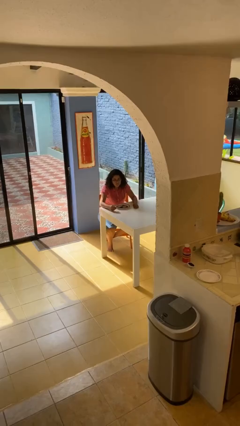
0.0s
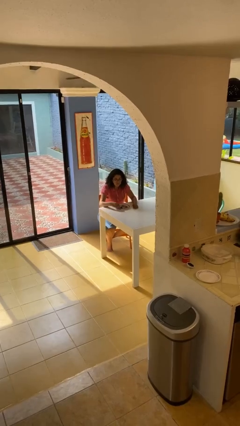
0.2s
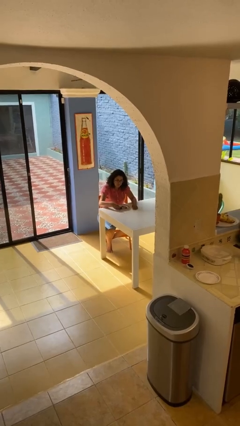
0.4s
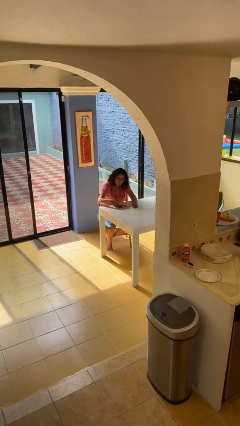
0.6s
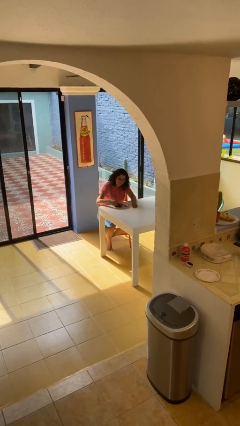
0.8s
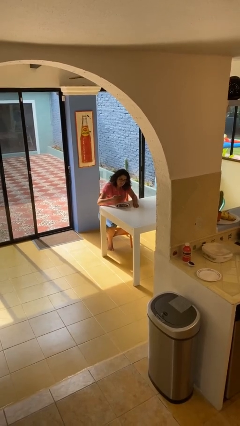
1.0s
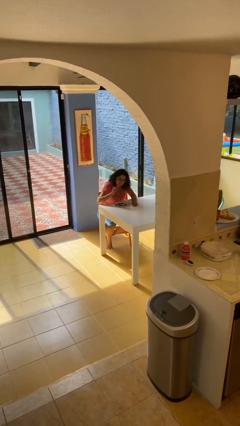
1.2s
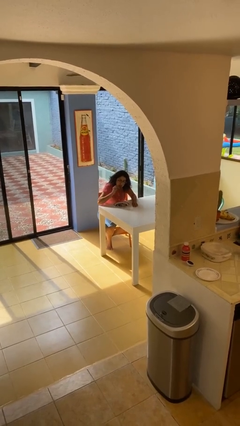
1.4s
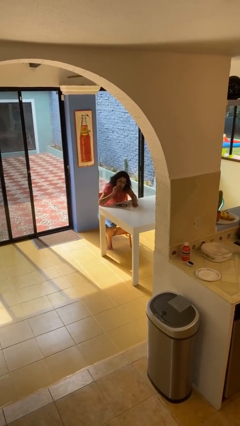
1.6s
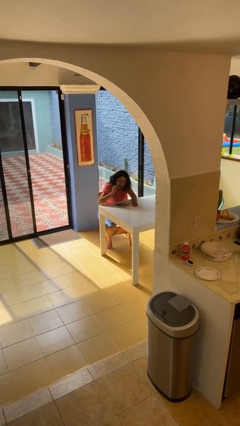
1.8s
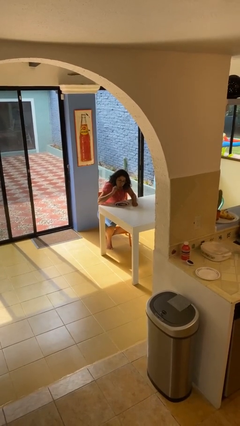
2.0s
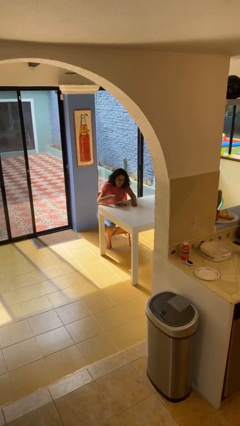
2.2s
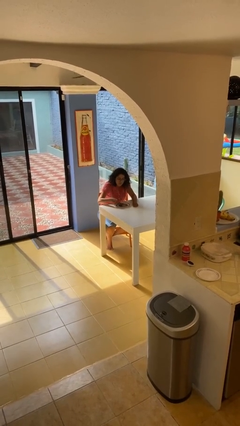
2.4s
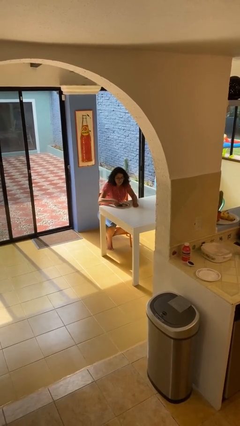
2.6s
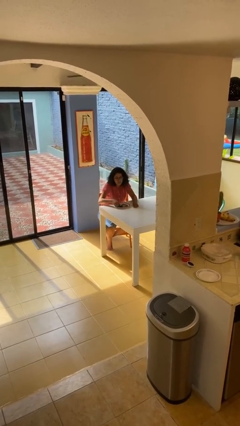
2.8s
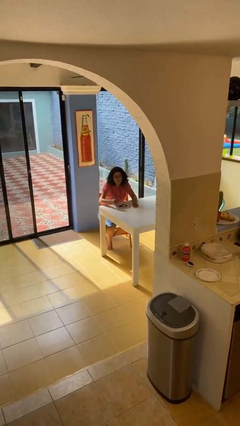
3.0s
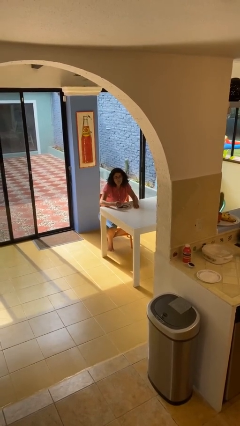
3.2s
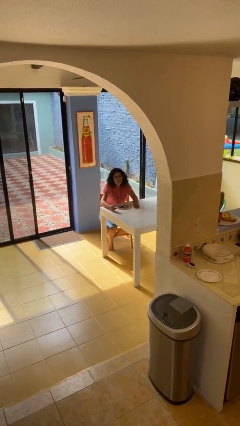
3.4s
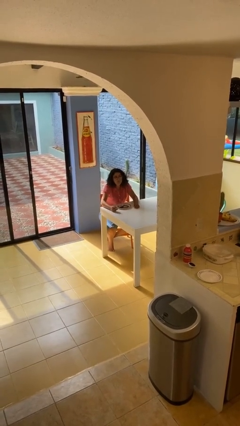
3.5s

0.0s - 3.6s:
person eats with hands

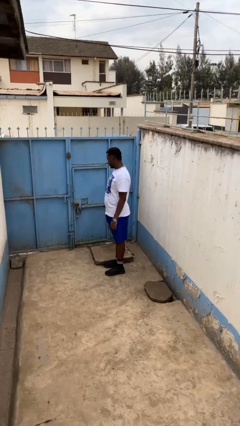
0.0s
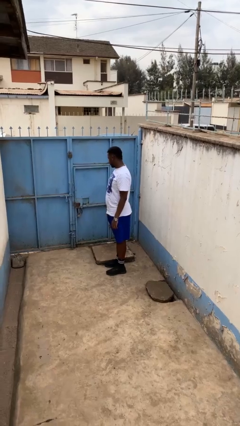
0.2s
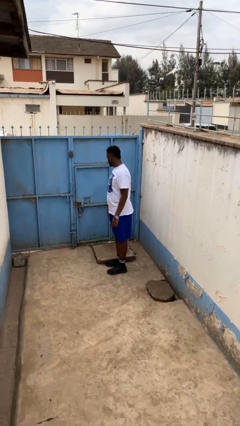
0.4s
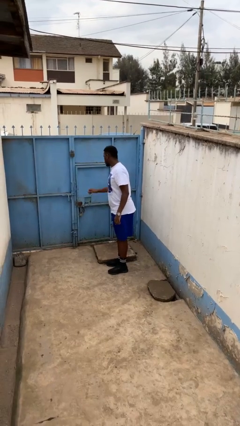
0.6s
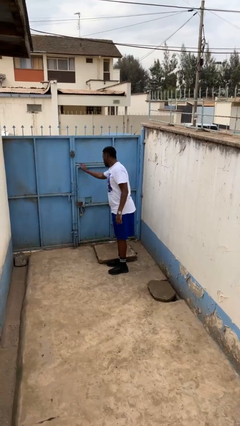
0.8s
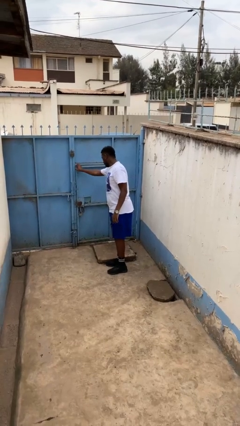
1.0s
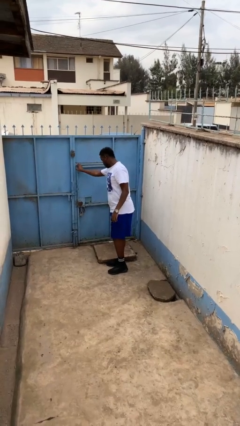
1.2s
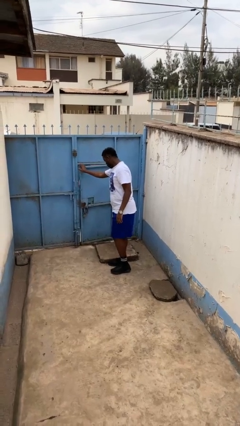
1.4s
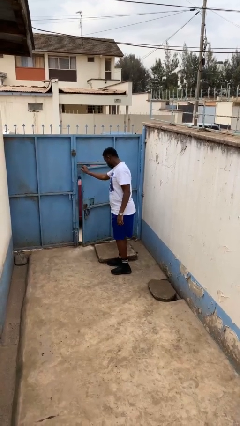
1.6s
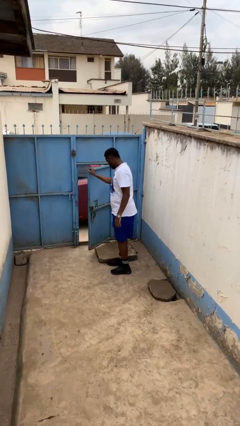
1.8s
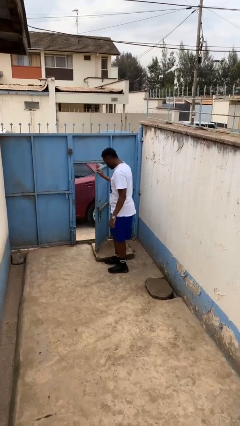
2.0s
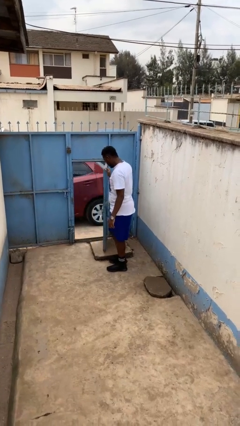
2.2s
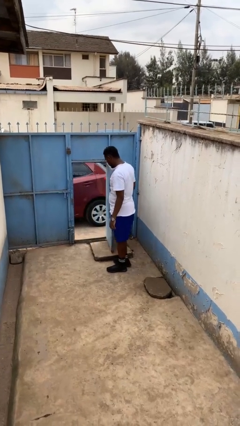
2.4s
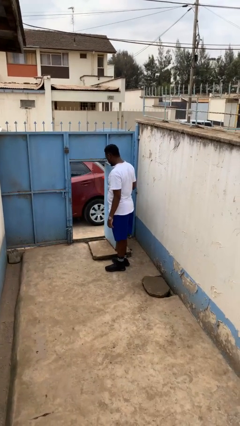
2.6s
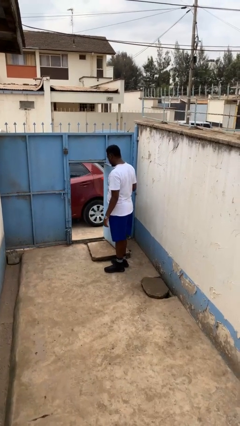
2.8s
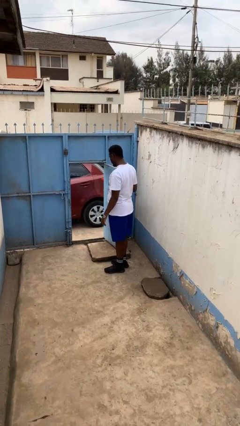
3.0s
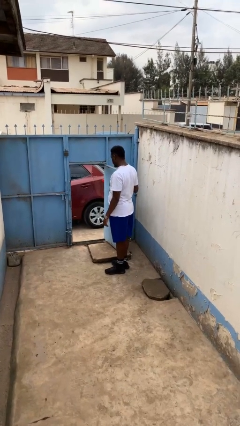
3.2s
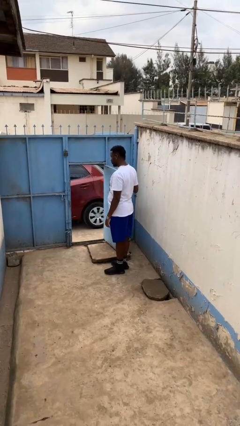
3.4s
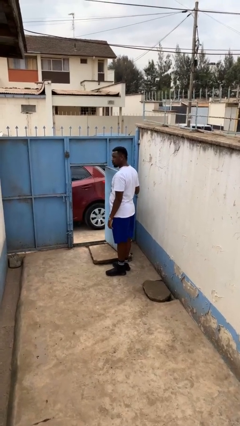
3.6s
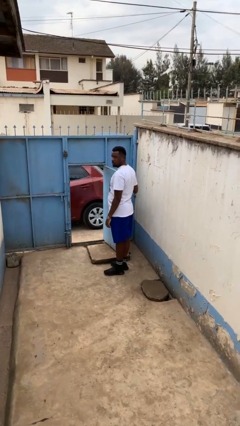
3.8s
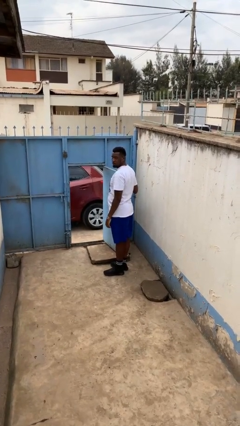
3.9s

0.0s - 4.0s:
person opens gate

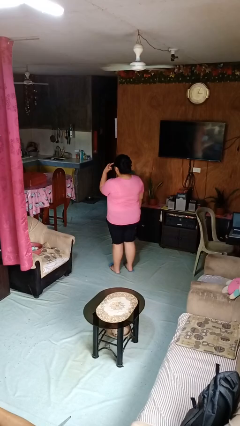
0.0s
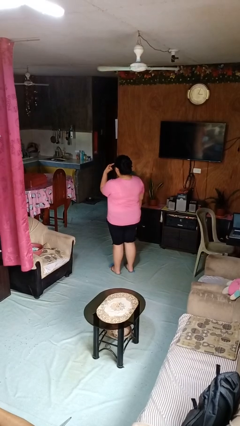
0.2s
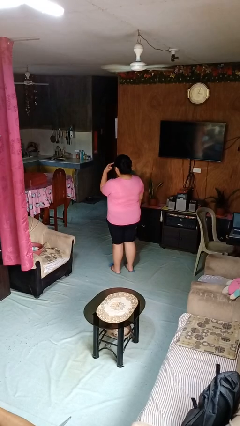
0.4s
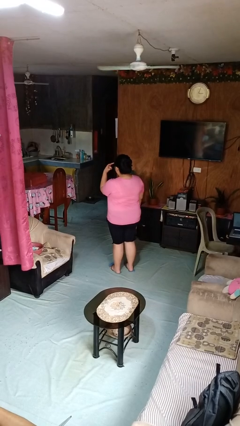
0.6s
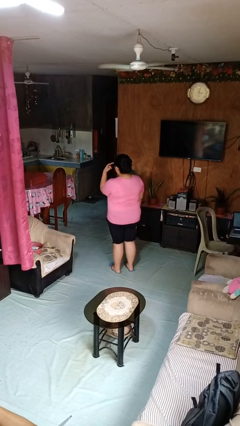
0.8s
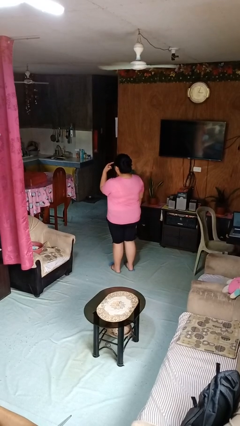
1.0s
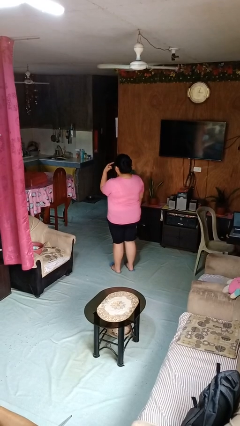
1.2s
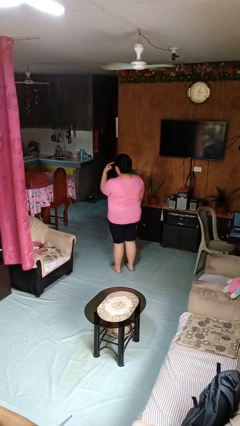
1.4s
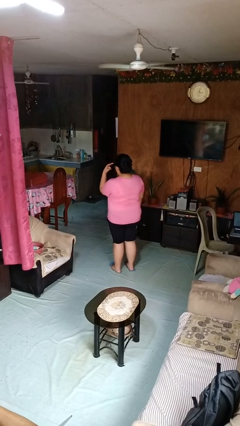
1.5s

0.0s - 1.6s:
person gestures watch closely

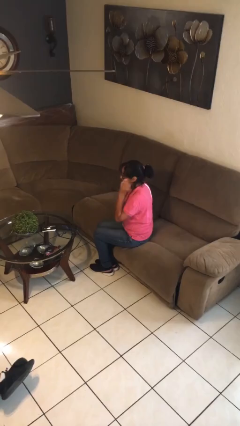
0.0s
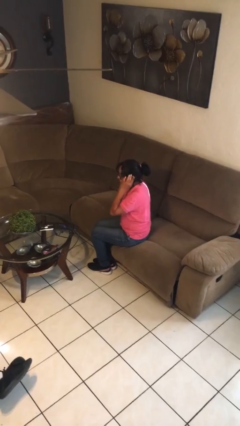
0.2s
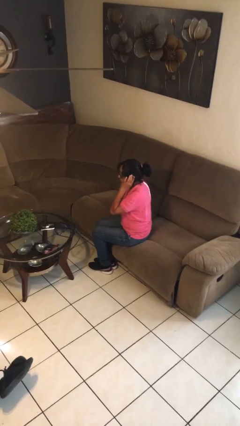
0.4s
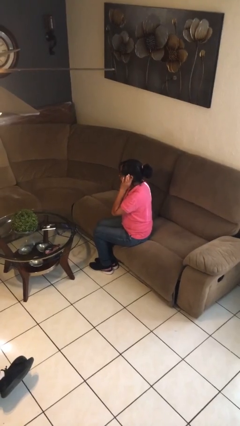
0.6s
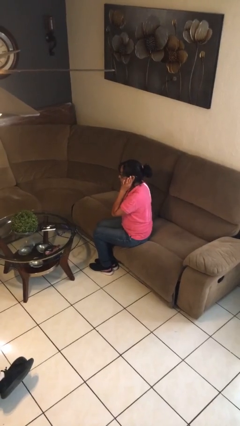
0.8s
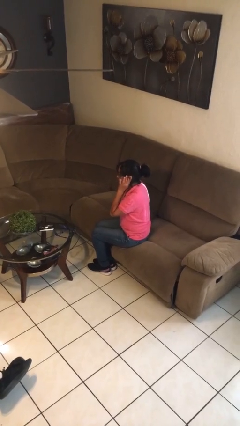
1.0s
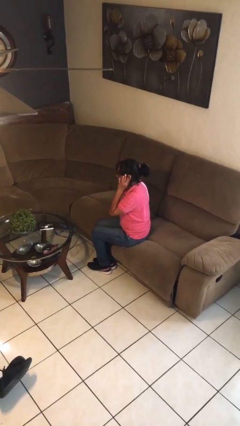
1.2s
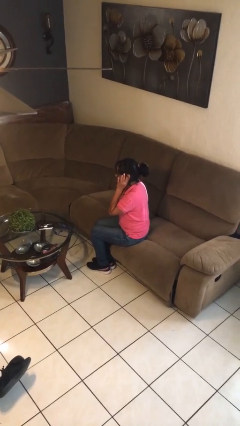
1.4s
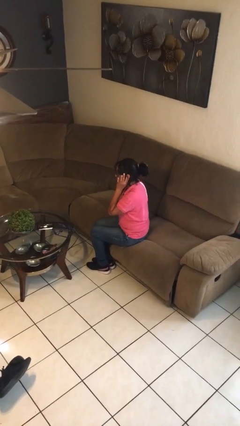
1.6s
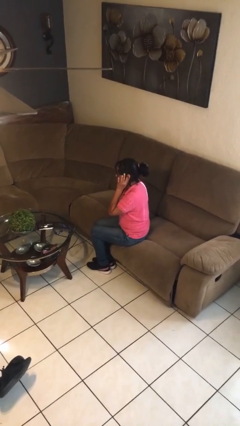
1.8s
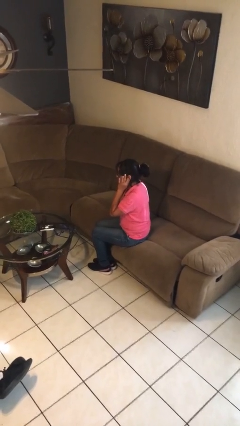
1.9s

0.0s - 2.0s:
person puts fingers in ear

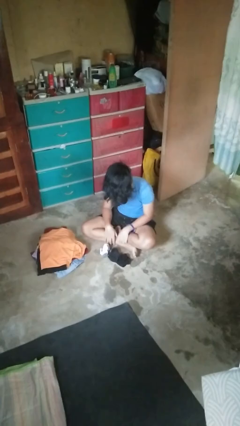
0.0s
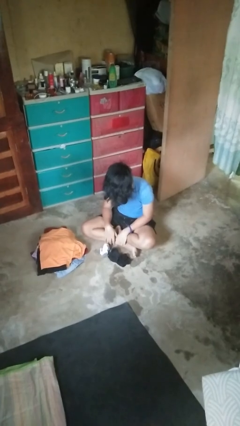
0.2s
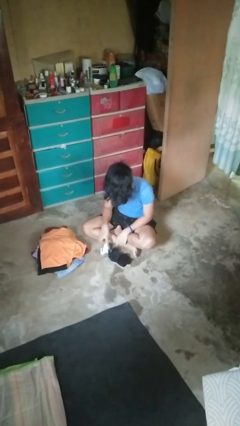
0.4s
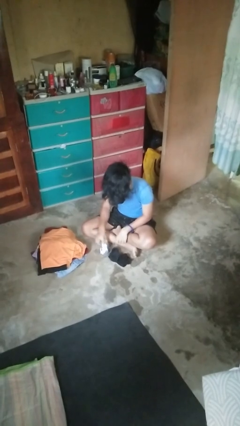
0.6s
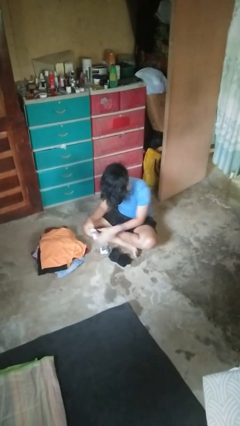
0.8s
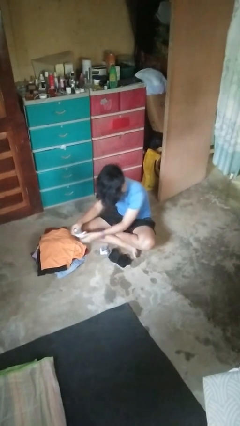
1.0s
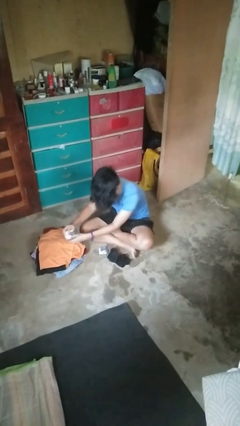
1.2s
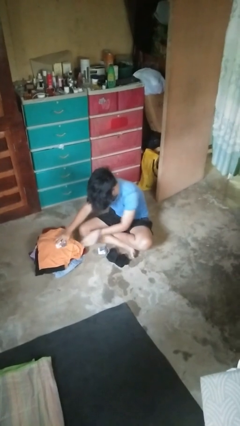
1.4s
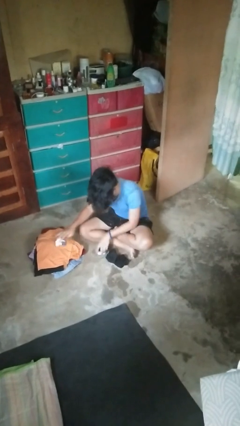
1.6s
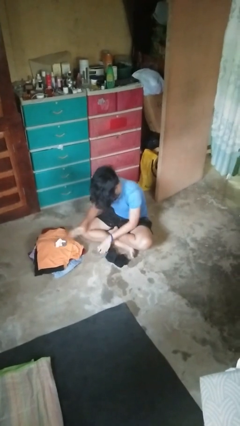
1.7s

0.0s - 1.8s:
person folds socks

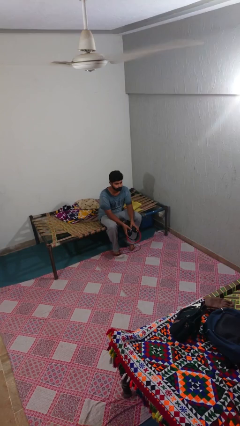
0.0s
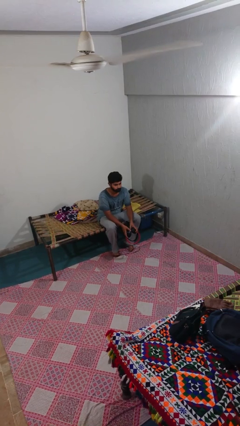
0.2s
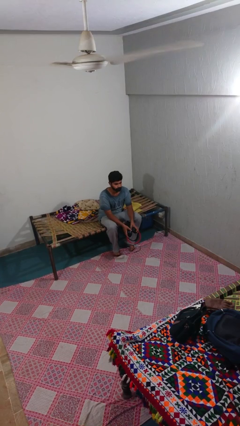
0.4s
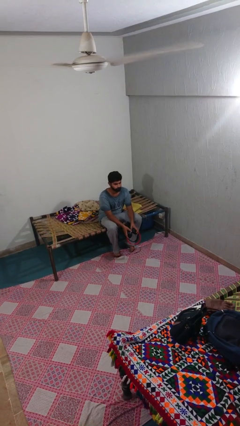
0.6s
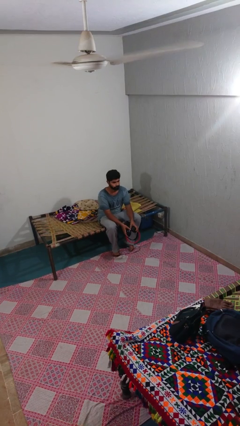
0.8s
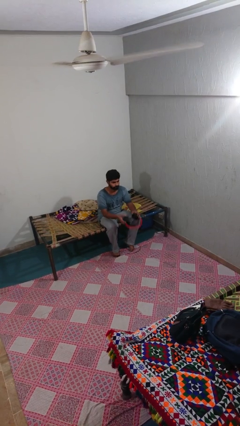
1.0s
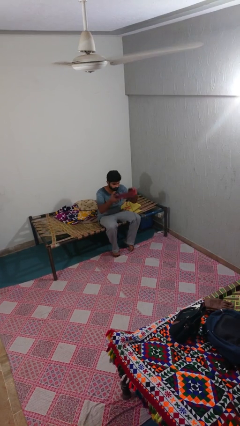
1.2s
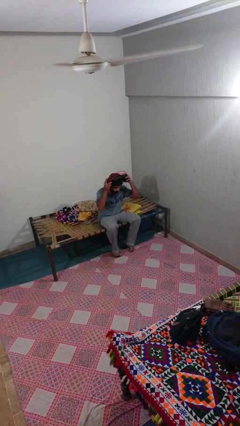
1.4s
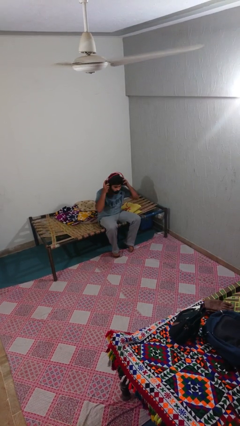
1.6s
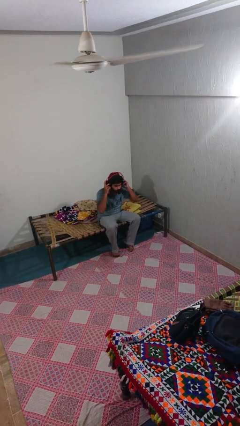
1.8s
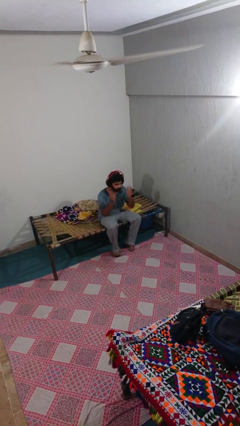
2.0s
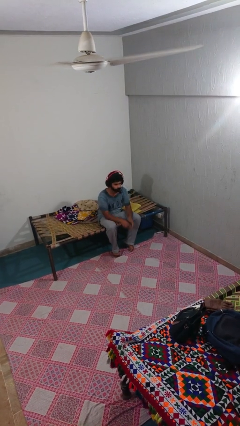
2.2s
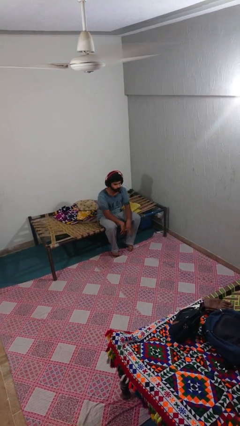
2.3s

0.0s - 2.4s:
person puts on headphones

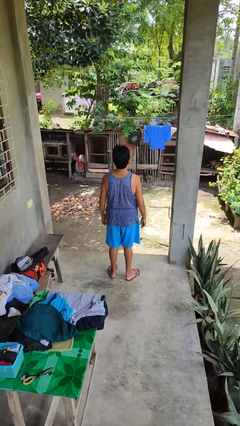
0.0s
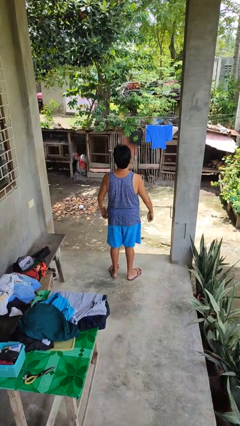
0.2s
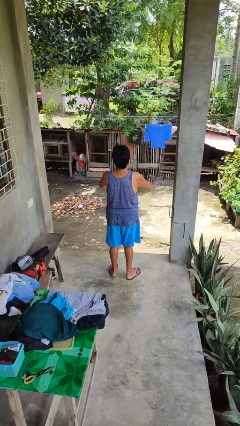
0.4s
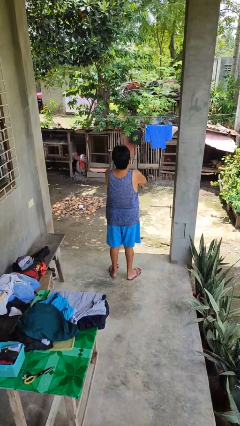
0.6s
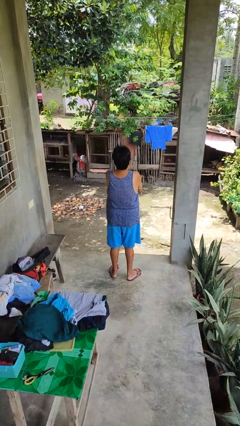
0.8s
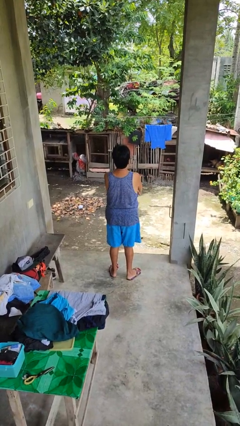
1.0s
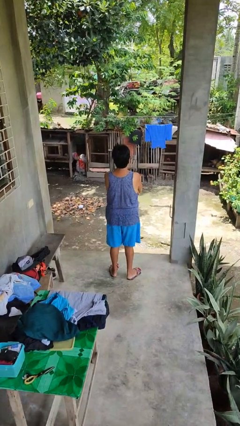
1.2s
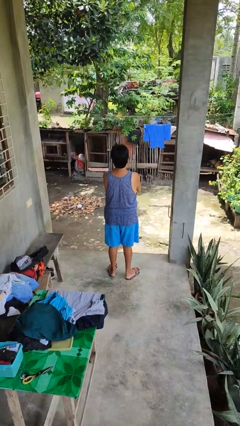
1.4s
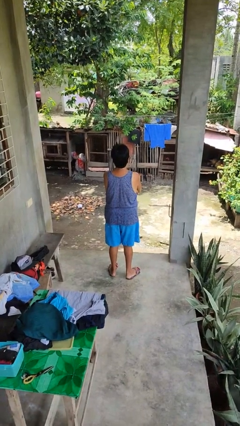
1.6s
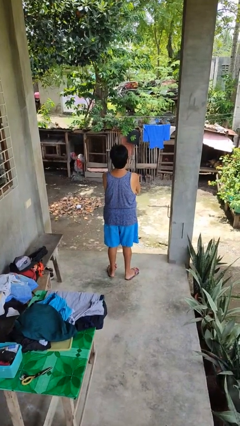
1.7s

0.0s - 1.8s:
person crosses arms
